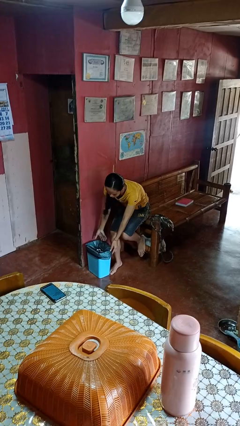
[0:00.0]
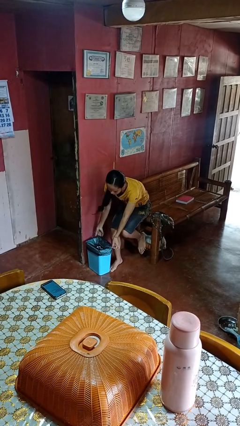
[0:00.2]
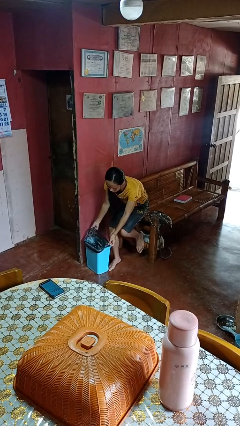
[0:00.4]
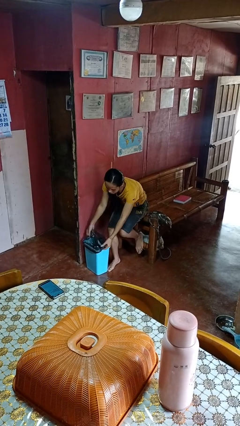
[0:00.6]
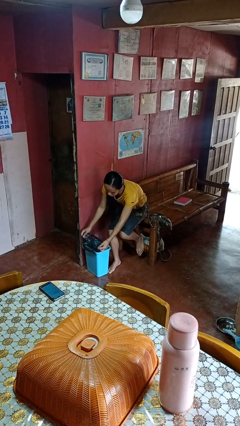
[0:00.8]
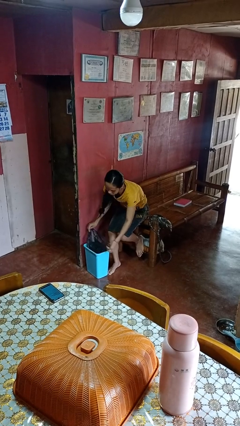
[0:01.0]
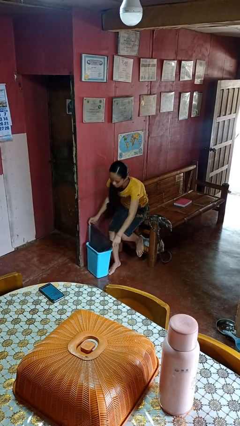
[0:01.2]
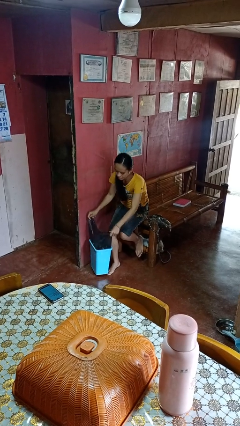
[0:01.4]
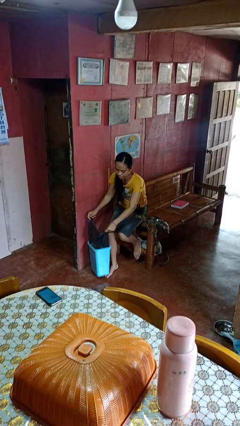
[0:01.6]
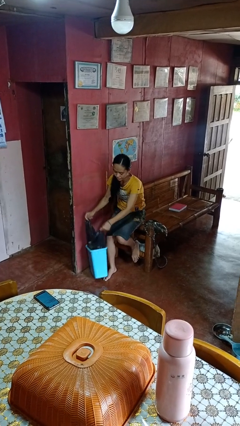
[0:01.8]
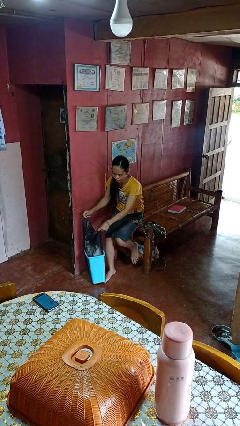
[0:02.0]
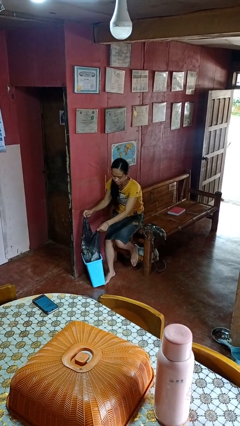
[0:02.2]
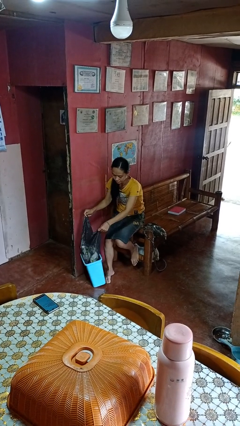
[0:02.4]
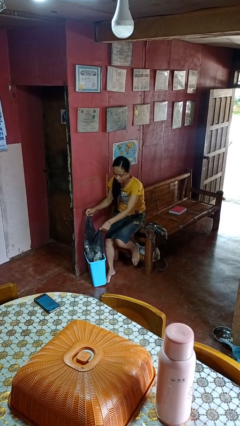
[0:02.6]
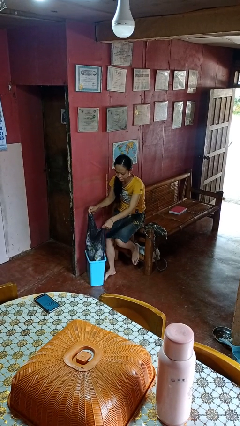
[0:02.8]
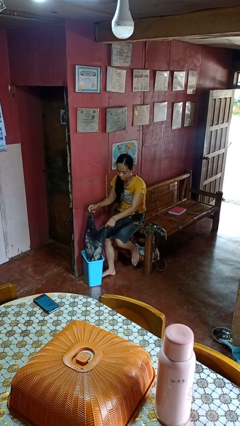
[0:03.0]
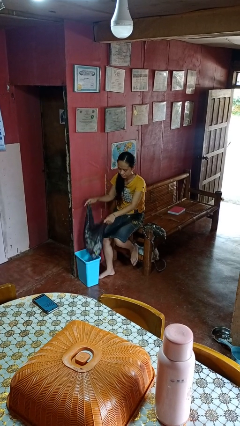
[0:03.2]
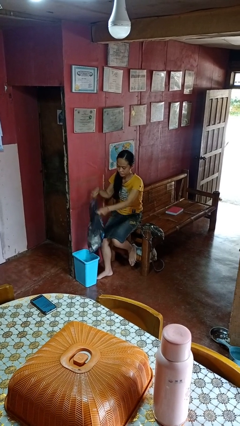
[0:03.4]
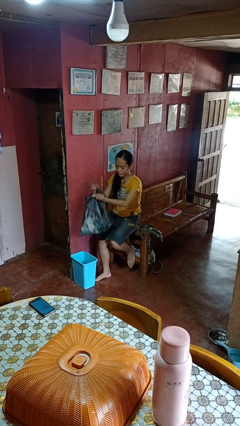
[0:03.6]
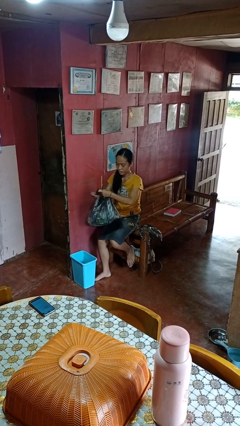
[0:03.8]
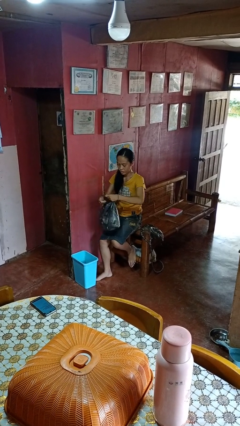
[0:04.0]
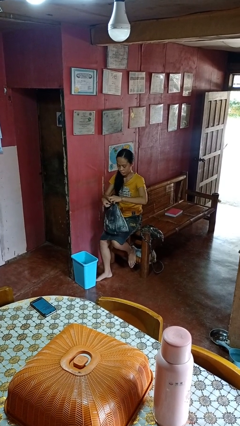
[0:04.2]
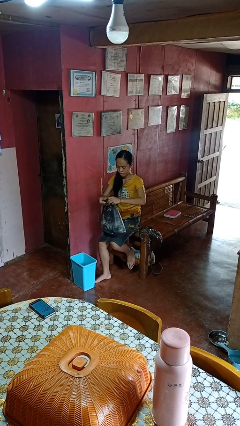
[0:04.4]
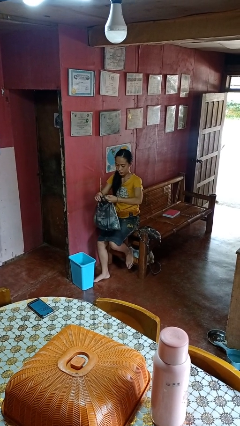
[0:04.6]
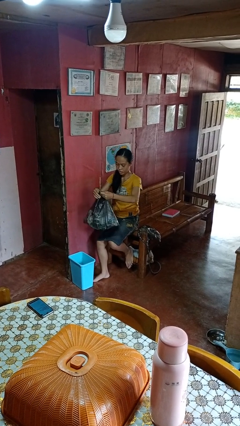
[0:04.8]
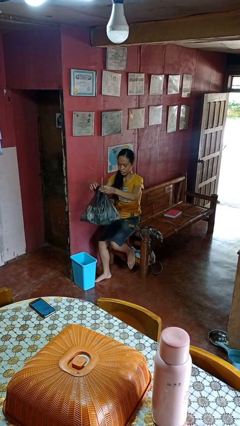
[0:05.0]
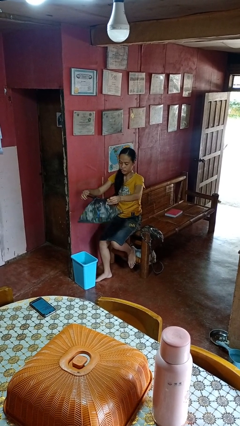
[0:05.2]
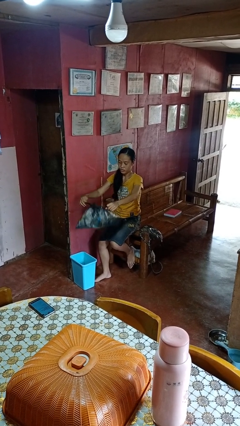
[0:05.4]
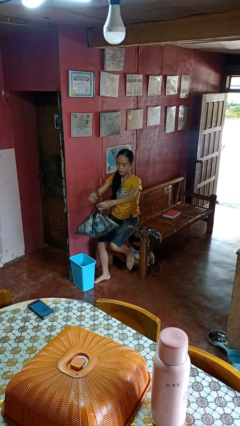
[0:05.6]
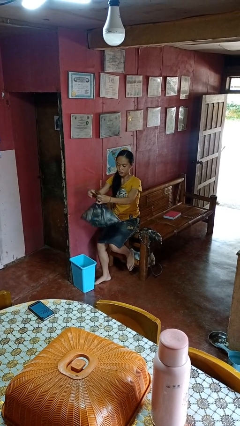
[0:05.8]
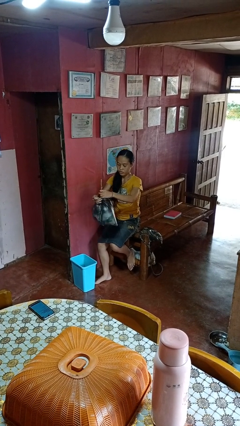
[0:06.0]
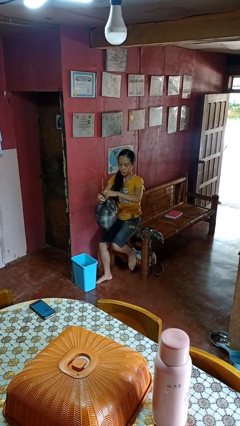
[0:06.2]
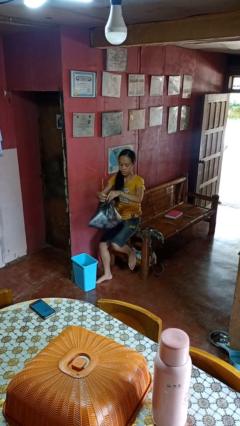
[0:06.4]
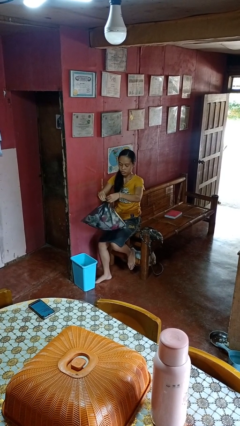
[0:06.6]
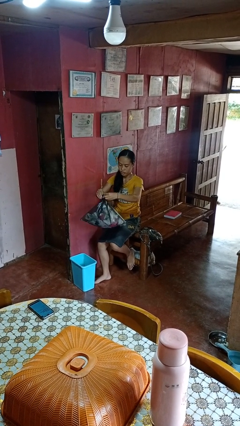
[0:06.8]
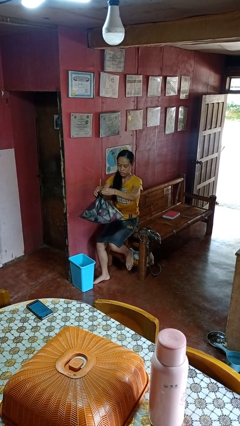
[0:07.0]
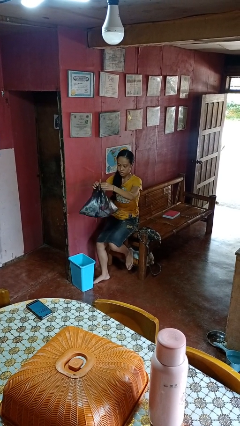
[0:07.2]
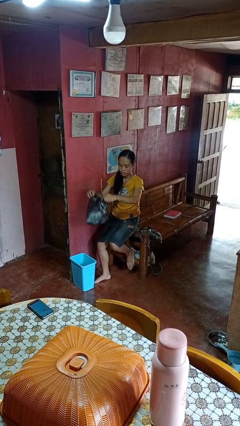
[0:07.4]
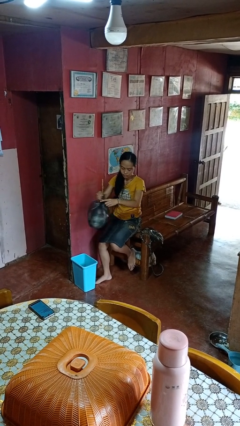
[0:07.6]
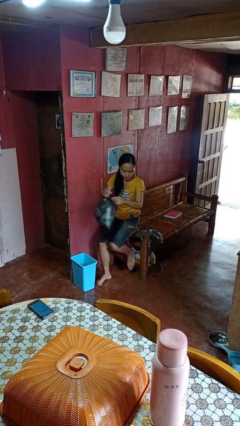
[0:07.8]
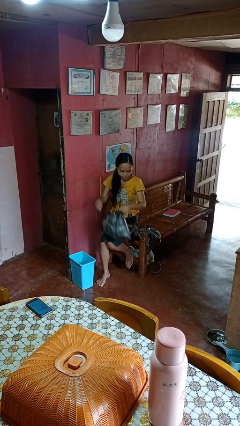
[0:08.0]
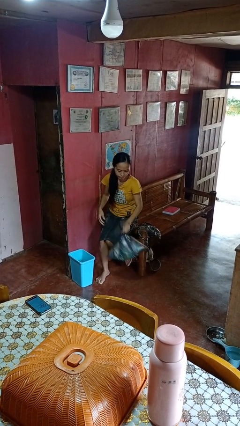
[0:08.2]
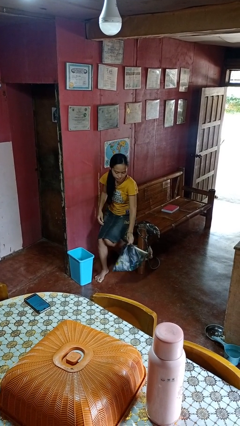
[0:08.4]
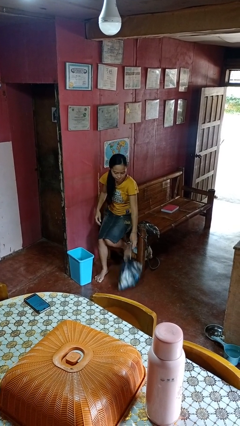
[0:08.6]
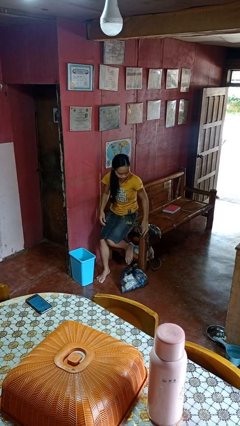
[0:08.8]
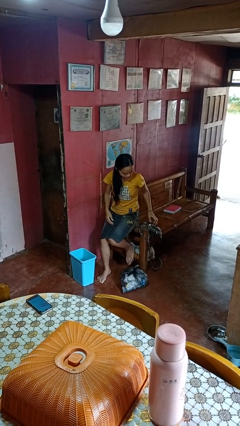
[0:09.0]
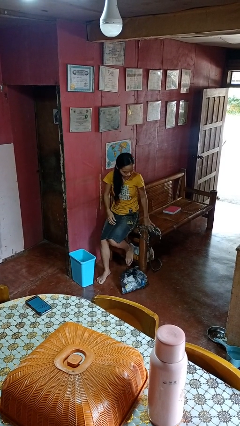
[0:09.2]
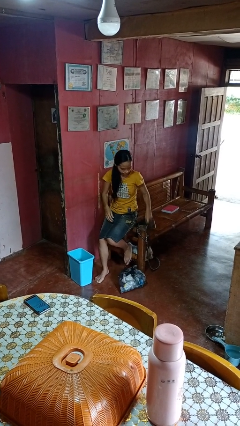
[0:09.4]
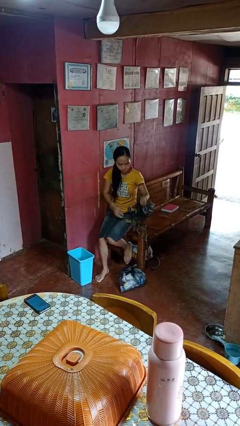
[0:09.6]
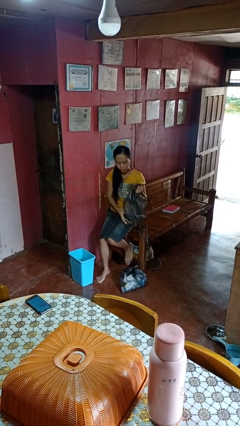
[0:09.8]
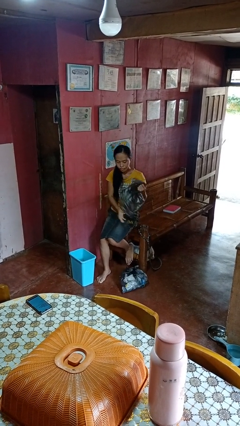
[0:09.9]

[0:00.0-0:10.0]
person removes trashbag from trashcan

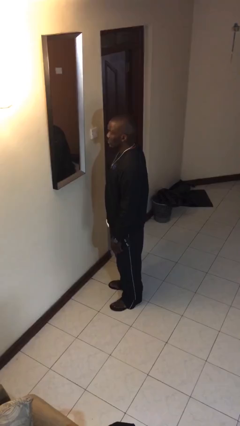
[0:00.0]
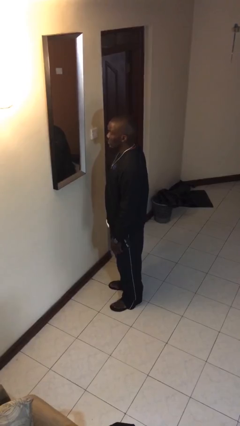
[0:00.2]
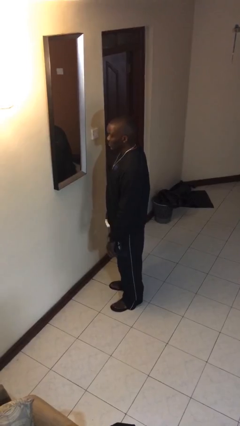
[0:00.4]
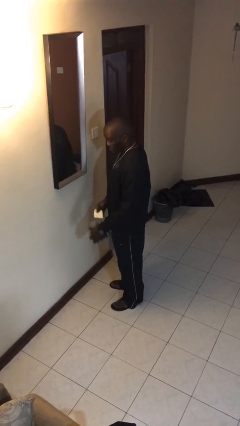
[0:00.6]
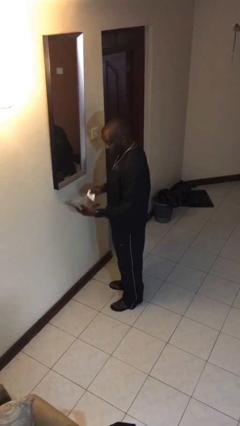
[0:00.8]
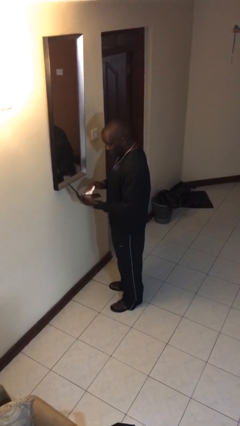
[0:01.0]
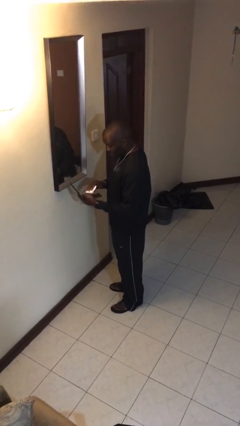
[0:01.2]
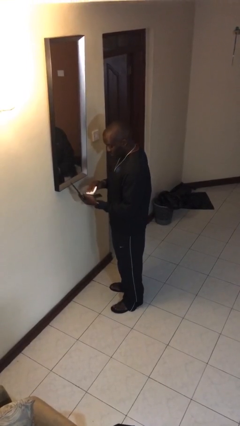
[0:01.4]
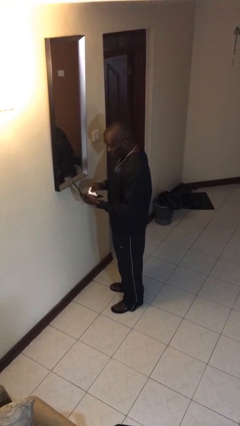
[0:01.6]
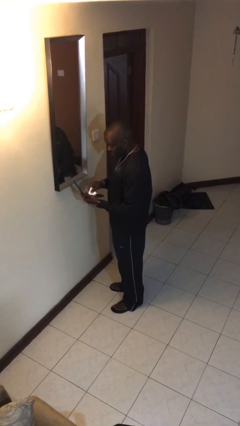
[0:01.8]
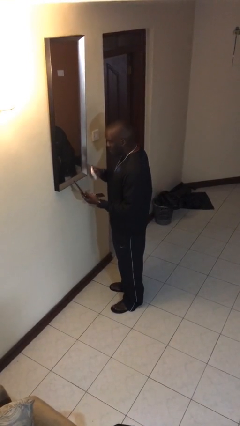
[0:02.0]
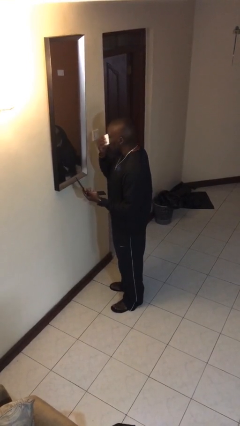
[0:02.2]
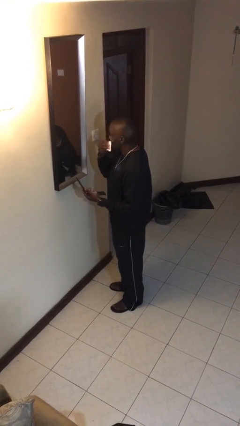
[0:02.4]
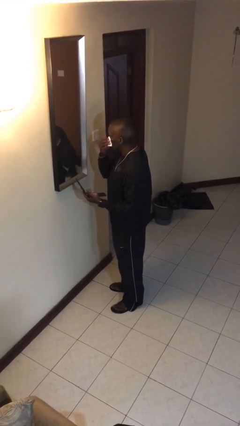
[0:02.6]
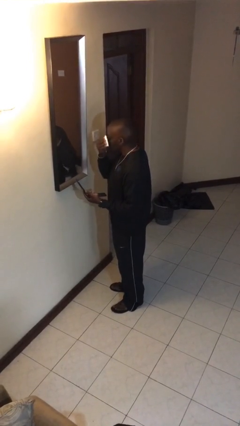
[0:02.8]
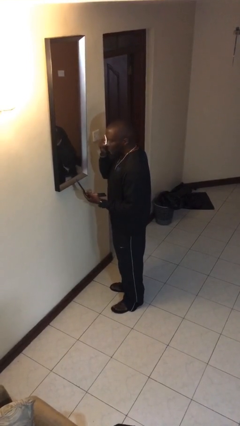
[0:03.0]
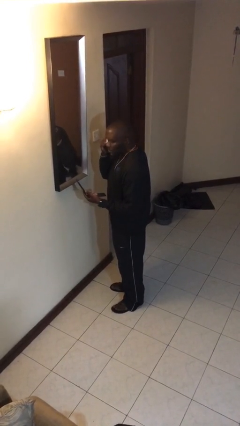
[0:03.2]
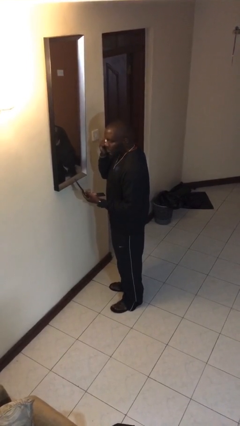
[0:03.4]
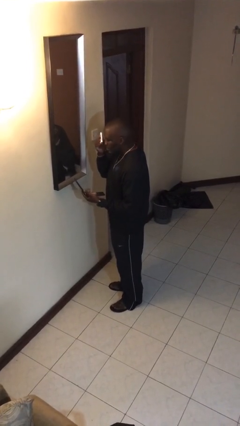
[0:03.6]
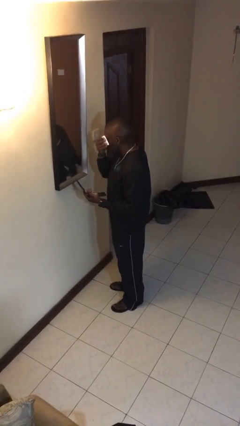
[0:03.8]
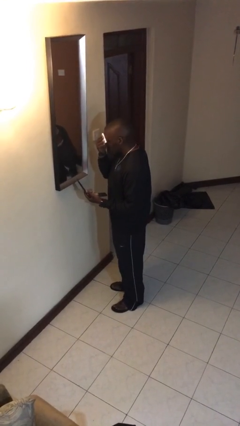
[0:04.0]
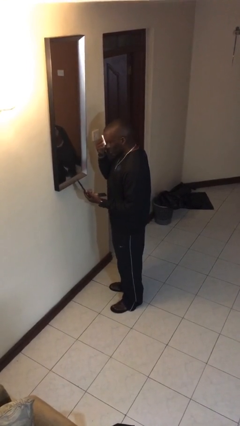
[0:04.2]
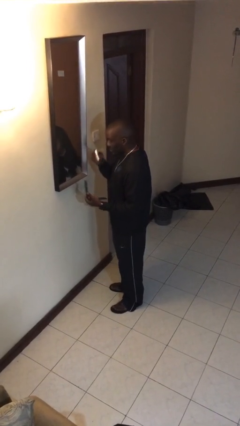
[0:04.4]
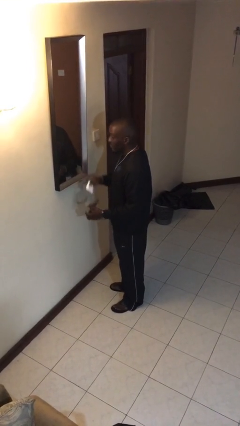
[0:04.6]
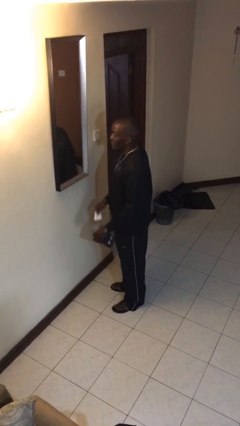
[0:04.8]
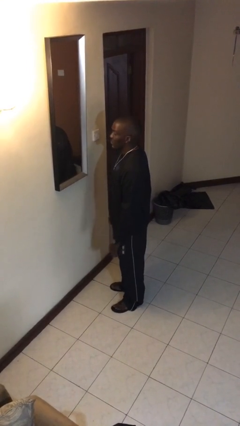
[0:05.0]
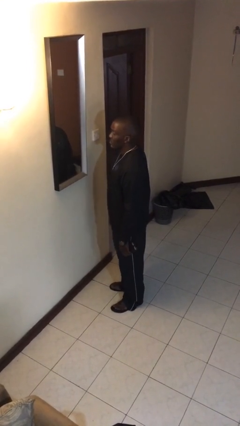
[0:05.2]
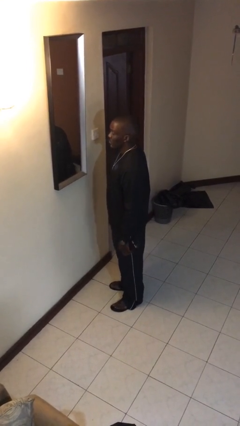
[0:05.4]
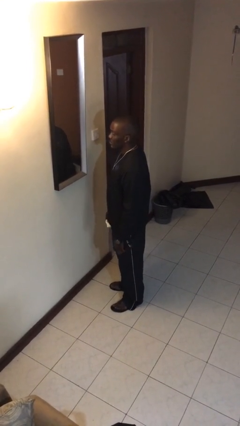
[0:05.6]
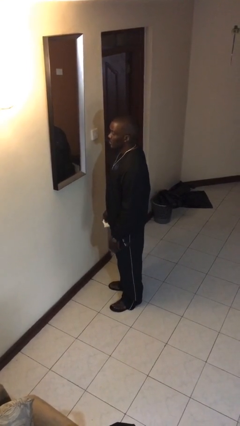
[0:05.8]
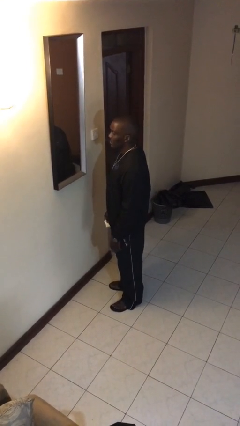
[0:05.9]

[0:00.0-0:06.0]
person applies foundation makeup

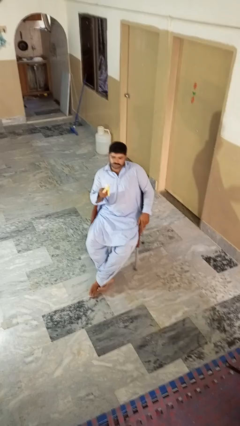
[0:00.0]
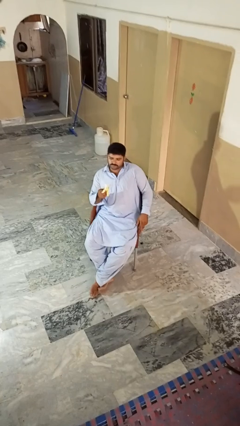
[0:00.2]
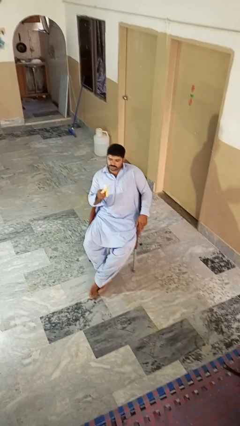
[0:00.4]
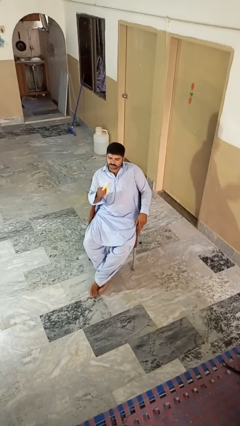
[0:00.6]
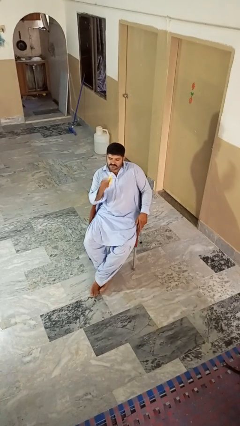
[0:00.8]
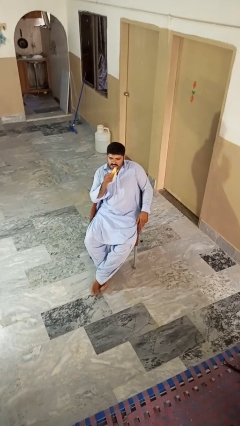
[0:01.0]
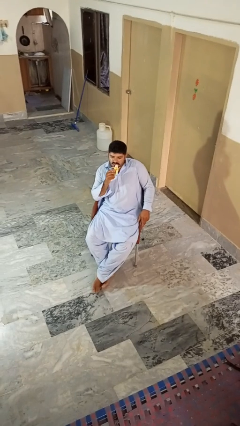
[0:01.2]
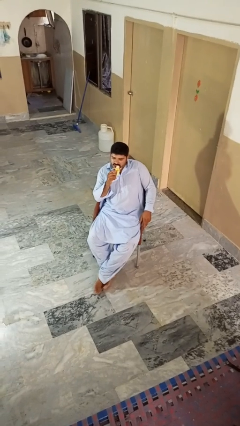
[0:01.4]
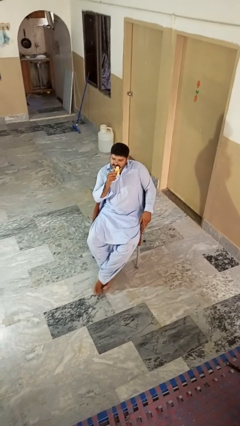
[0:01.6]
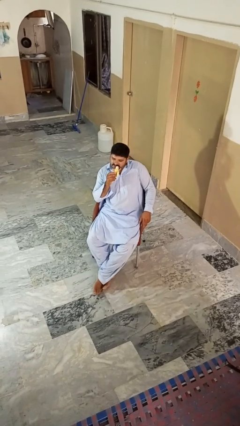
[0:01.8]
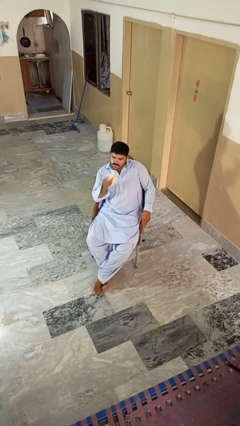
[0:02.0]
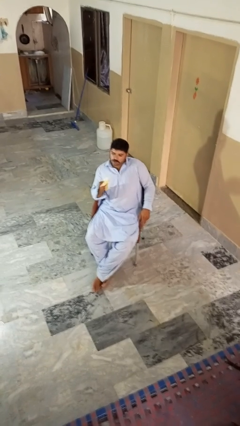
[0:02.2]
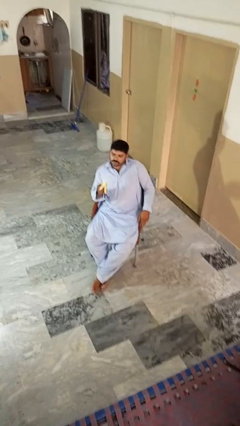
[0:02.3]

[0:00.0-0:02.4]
person eats banana
